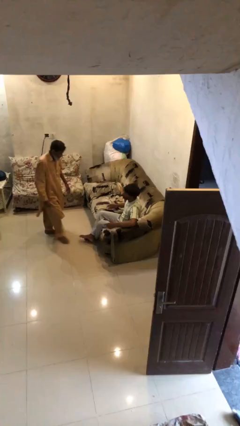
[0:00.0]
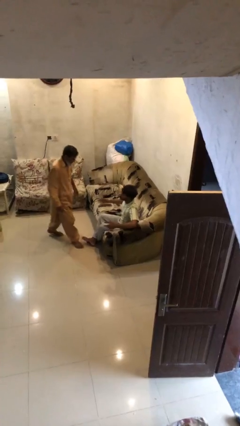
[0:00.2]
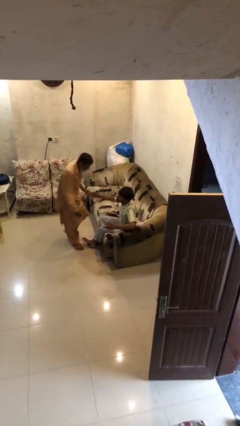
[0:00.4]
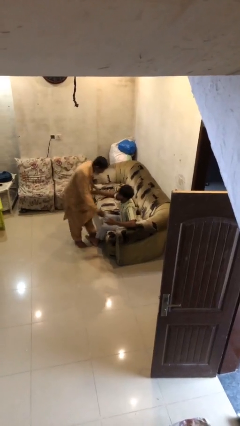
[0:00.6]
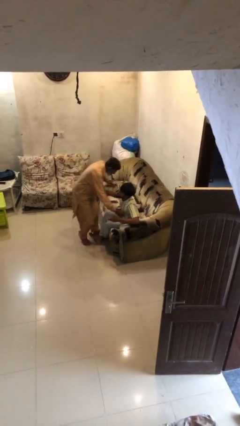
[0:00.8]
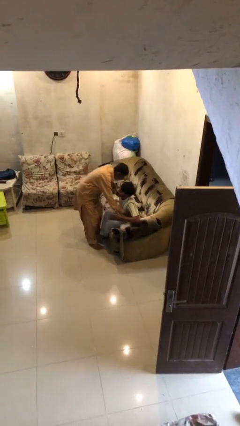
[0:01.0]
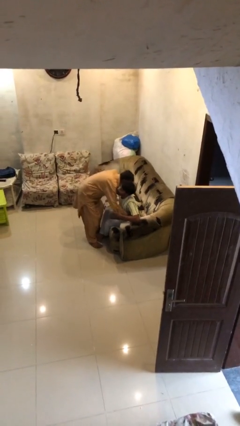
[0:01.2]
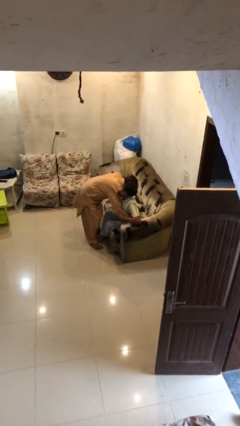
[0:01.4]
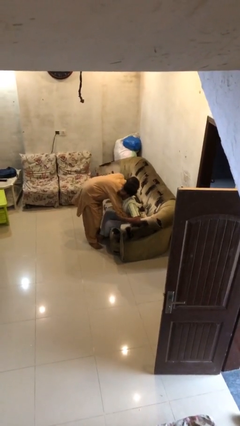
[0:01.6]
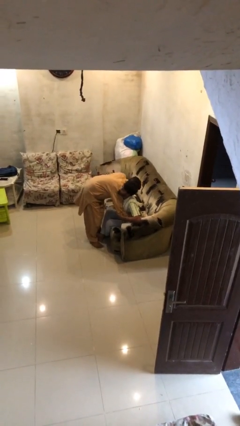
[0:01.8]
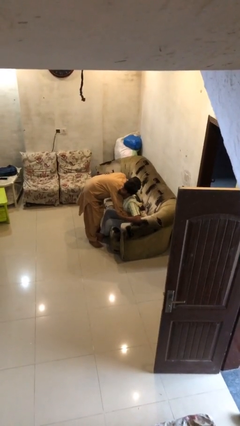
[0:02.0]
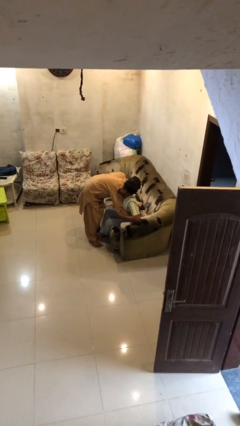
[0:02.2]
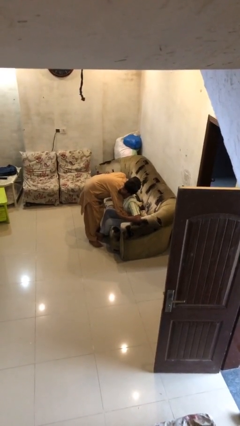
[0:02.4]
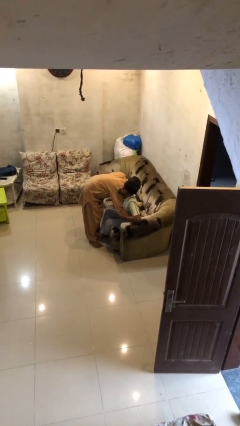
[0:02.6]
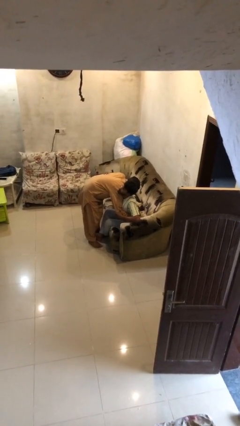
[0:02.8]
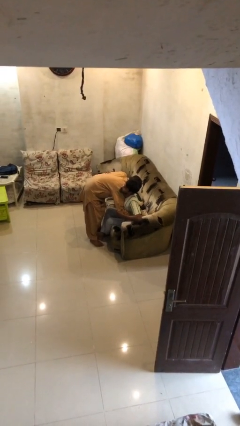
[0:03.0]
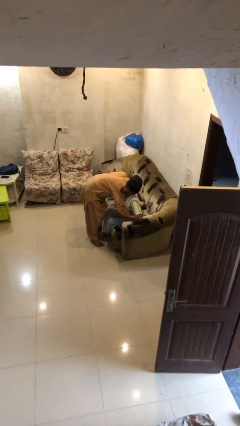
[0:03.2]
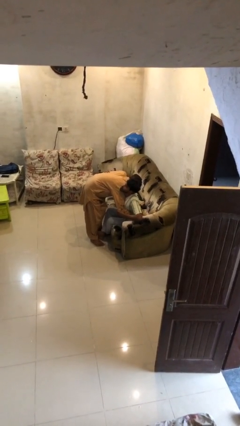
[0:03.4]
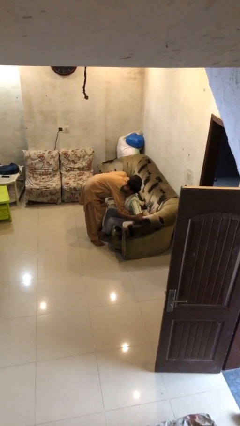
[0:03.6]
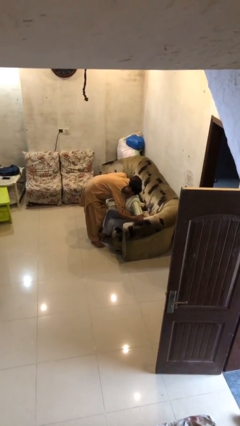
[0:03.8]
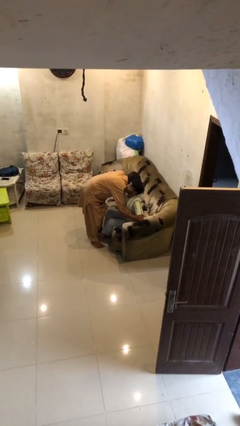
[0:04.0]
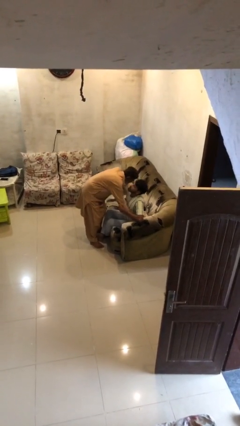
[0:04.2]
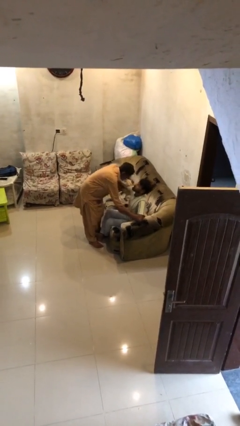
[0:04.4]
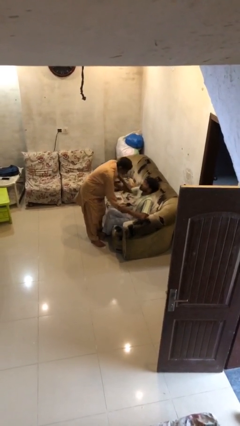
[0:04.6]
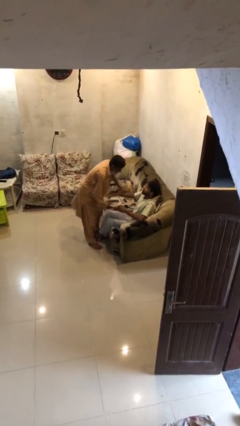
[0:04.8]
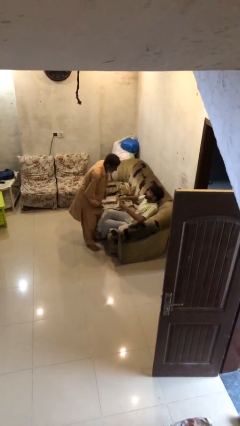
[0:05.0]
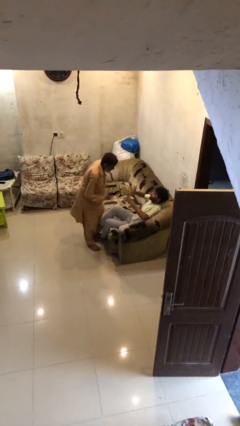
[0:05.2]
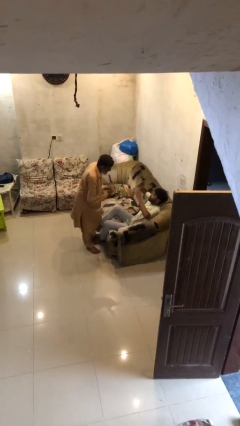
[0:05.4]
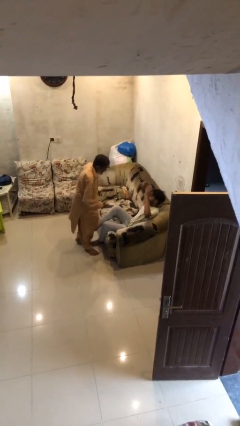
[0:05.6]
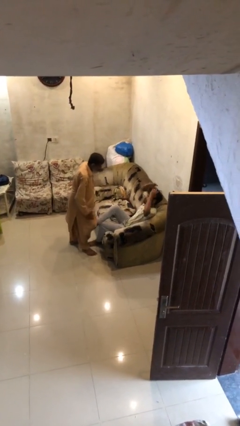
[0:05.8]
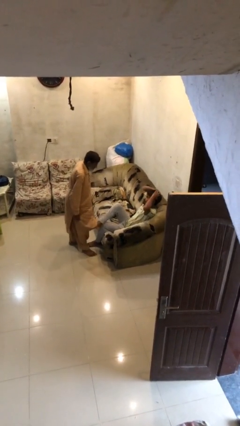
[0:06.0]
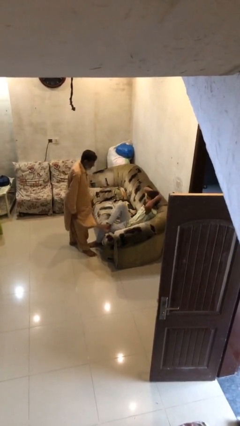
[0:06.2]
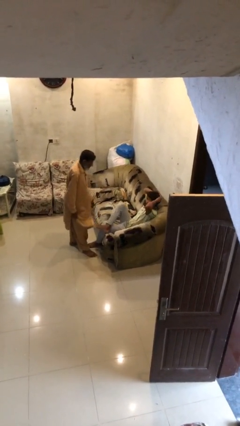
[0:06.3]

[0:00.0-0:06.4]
person embraces person

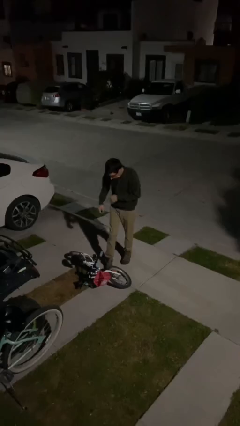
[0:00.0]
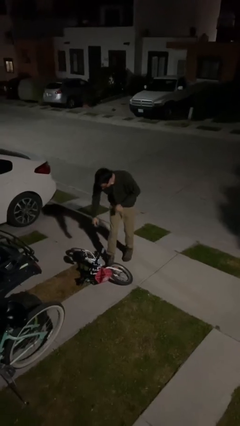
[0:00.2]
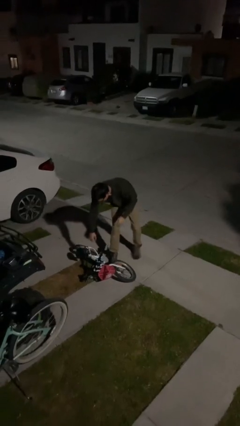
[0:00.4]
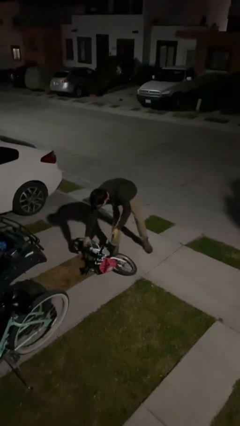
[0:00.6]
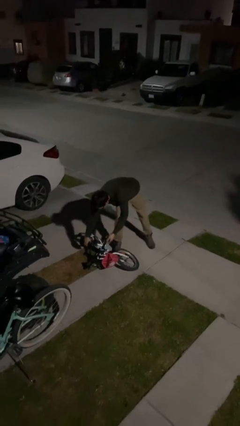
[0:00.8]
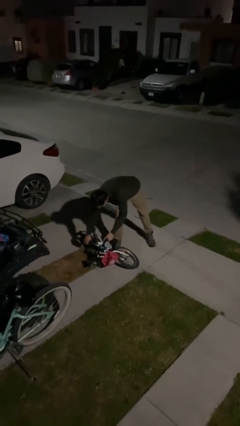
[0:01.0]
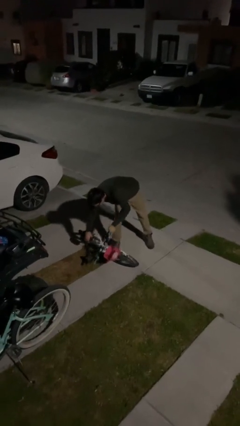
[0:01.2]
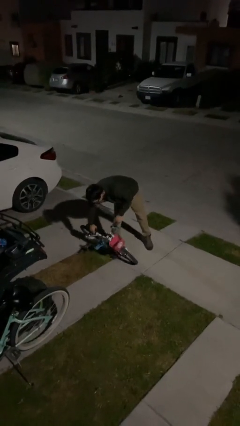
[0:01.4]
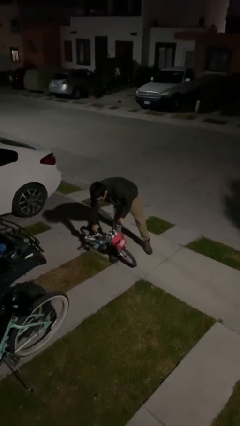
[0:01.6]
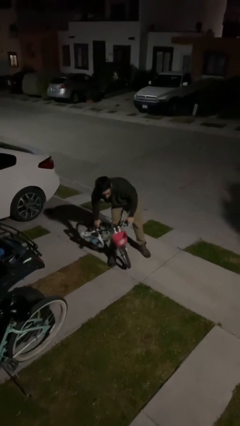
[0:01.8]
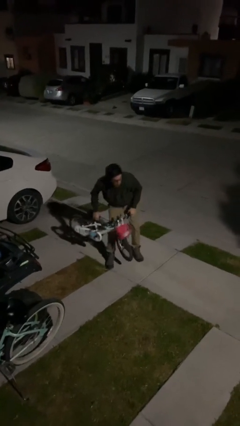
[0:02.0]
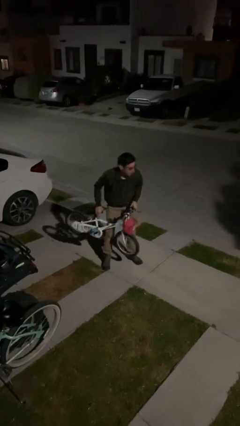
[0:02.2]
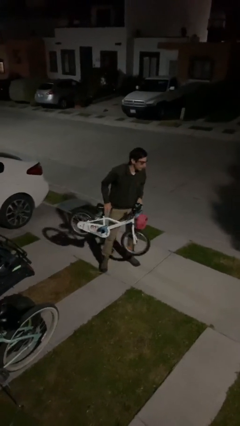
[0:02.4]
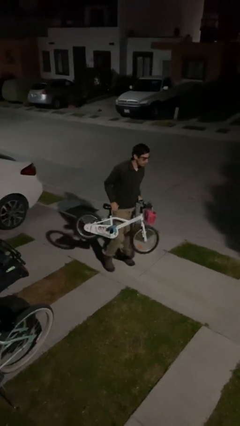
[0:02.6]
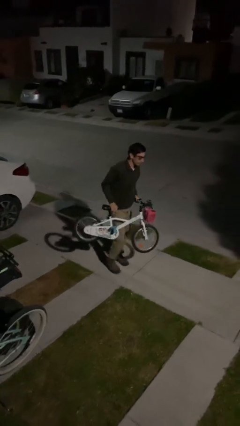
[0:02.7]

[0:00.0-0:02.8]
person picks up object from floor

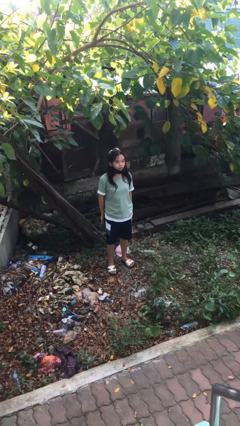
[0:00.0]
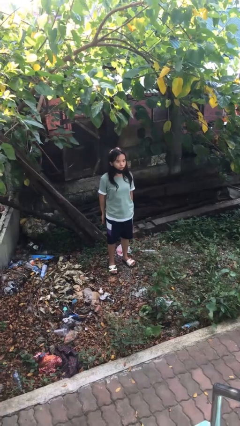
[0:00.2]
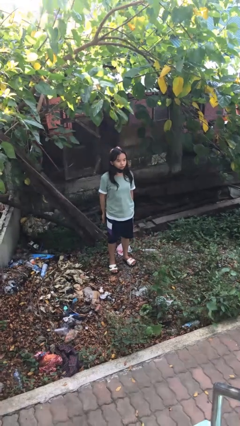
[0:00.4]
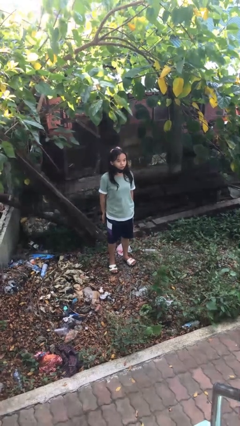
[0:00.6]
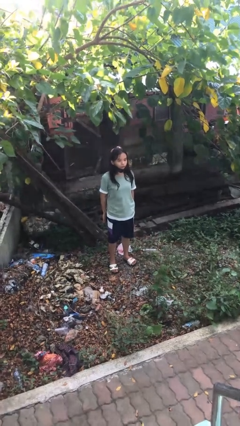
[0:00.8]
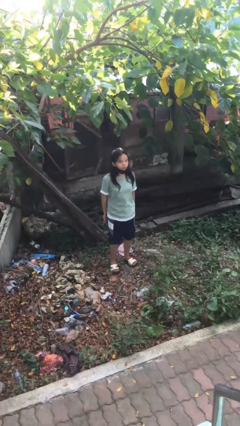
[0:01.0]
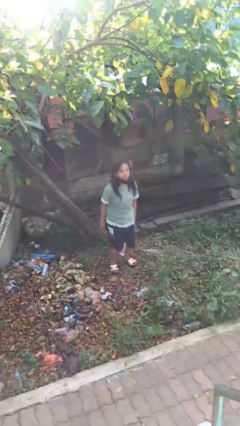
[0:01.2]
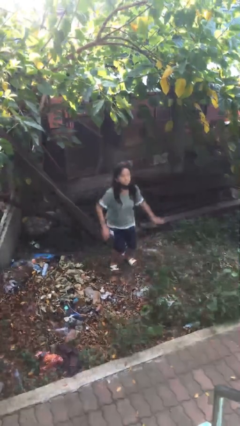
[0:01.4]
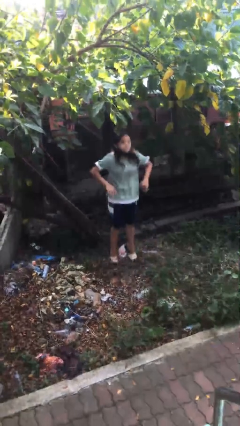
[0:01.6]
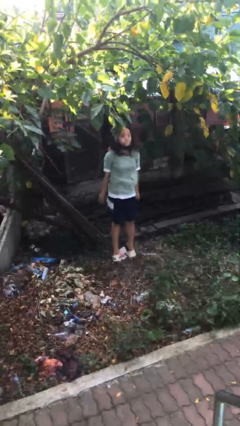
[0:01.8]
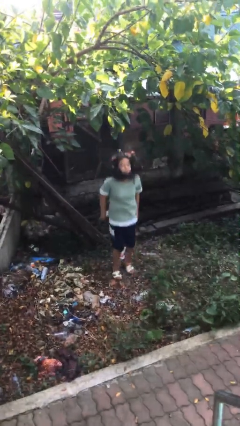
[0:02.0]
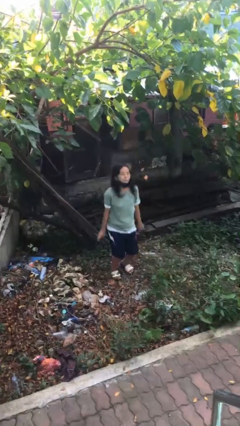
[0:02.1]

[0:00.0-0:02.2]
person jumps

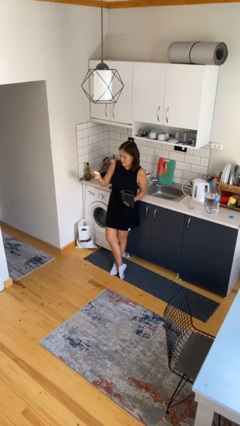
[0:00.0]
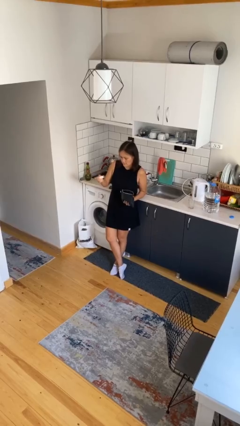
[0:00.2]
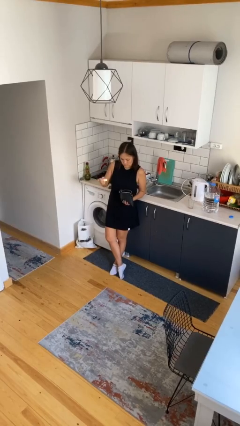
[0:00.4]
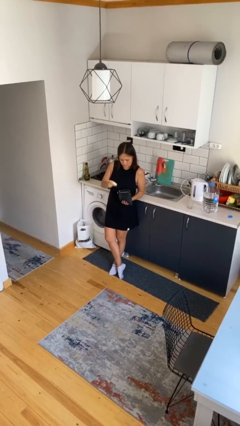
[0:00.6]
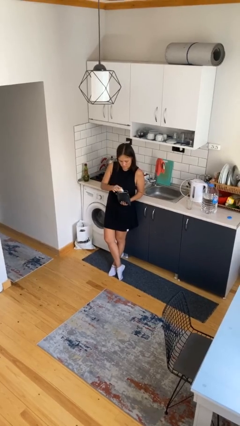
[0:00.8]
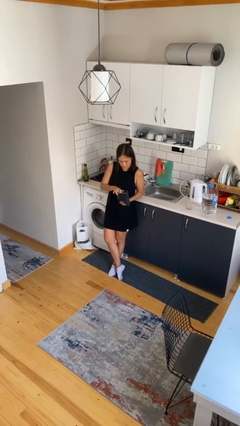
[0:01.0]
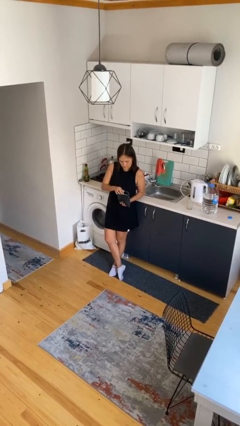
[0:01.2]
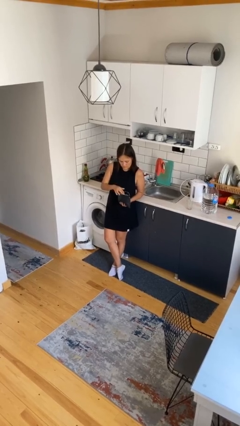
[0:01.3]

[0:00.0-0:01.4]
person puts object into purse

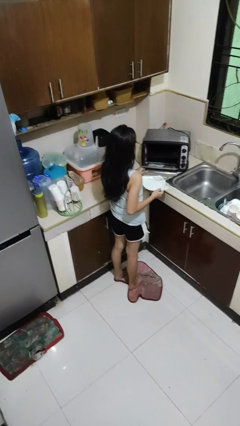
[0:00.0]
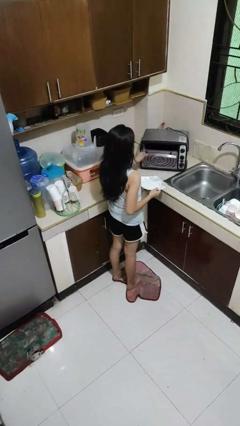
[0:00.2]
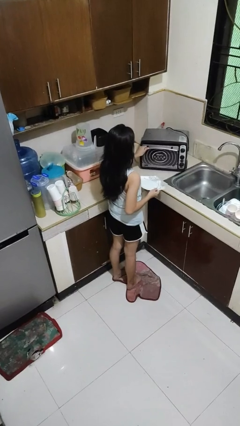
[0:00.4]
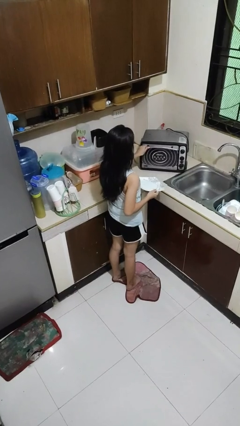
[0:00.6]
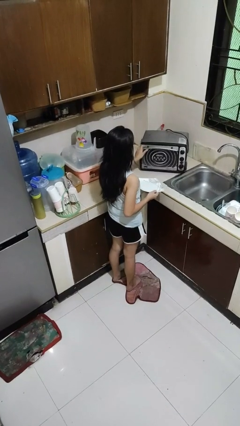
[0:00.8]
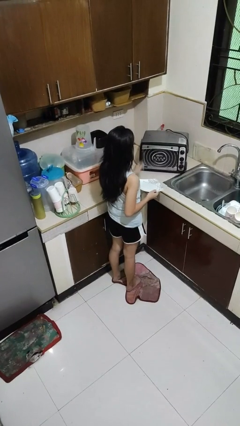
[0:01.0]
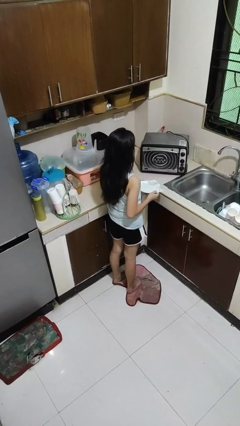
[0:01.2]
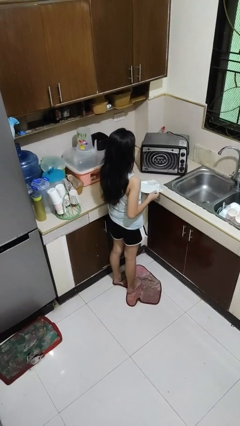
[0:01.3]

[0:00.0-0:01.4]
person closes microwave

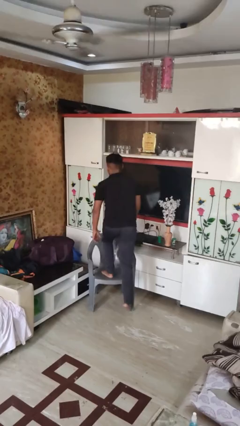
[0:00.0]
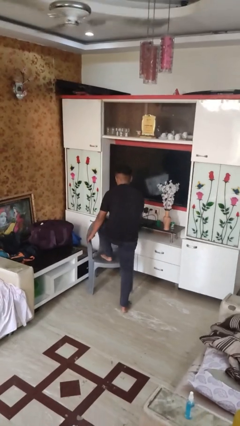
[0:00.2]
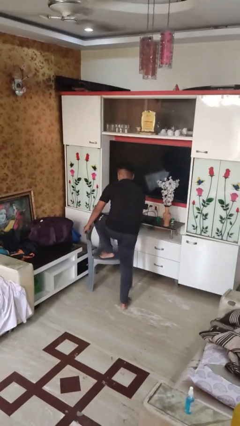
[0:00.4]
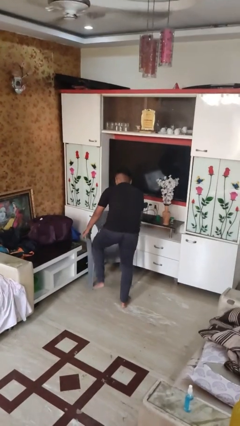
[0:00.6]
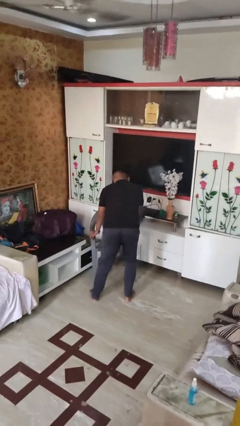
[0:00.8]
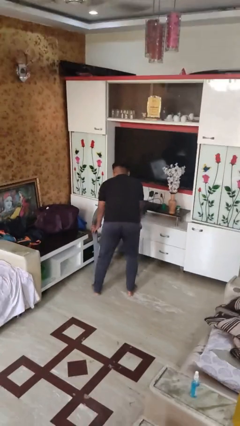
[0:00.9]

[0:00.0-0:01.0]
person climbs off chair

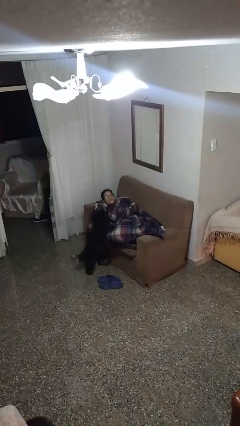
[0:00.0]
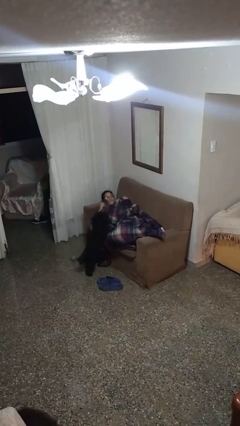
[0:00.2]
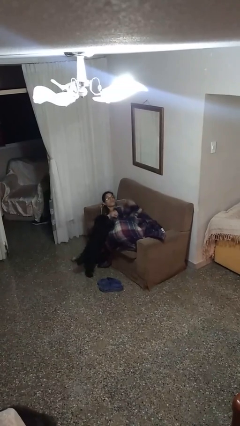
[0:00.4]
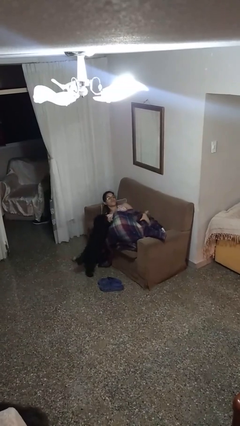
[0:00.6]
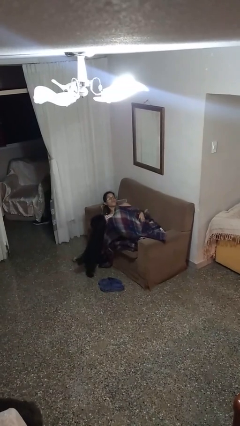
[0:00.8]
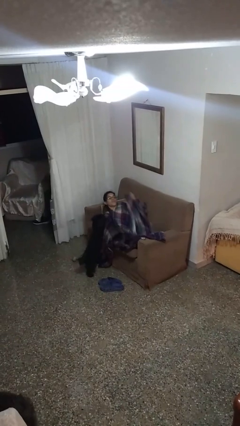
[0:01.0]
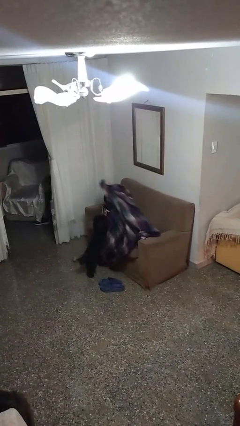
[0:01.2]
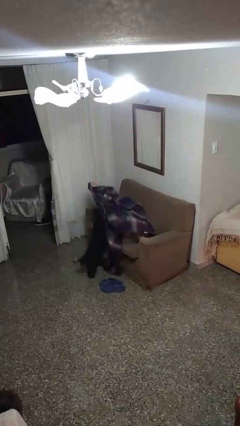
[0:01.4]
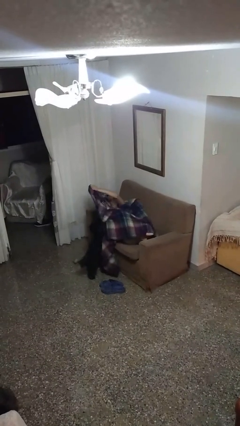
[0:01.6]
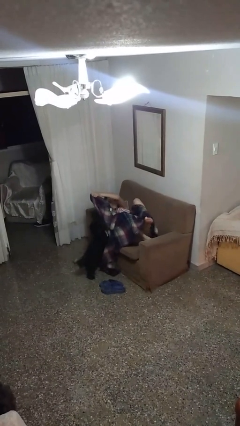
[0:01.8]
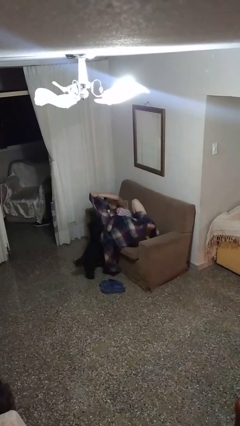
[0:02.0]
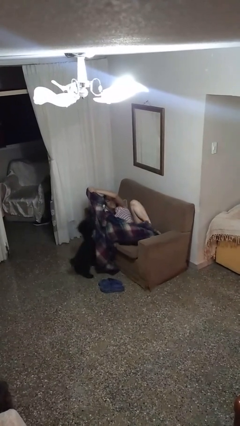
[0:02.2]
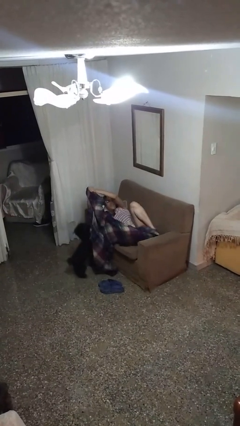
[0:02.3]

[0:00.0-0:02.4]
person uncovers with blanket
